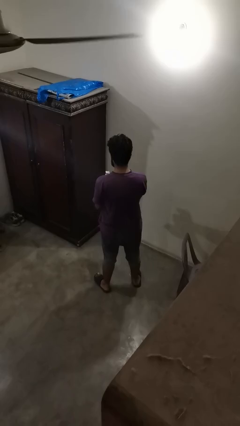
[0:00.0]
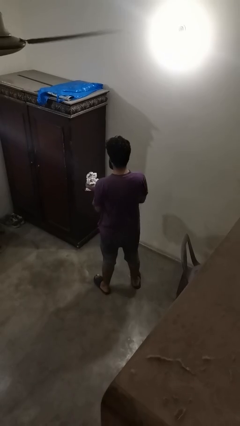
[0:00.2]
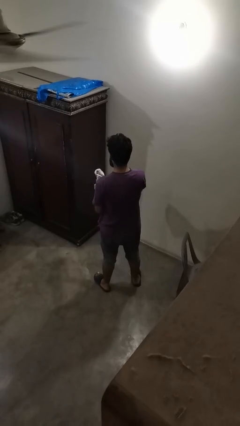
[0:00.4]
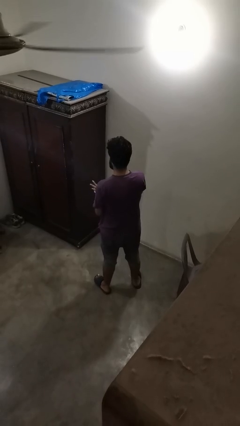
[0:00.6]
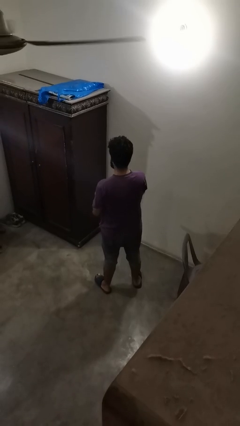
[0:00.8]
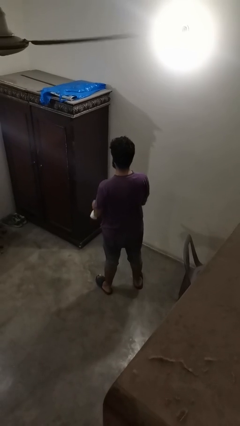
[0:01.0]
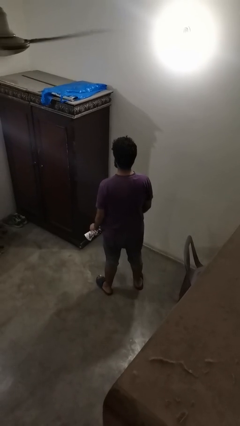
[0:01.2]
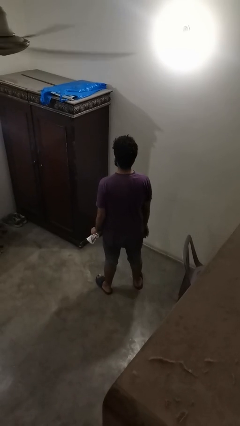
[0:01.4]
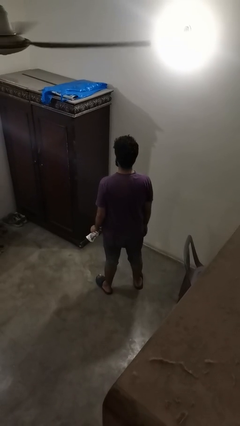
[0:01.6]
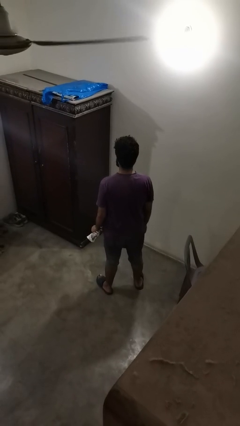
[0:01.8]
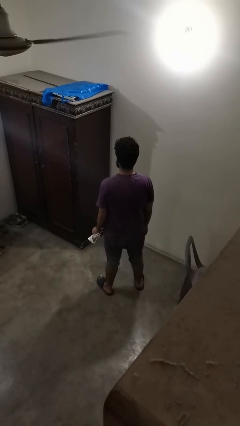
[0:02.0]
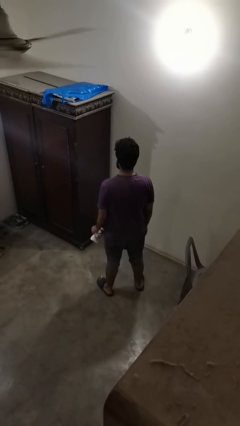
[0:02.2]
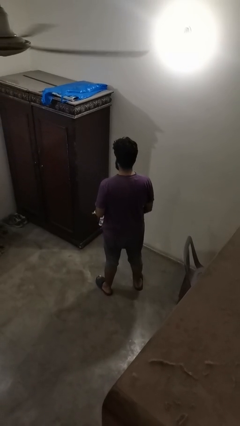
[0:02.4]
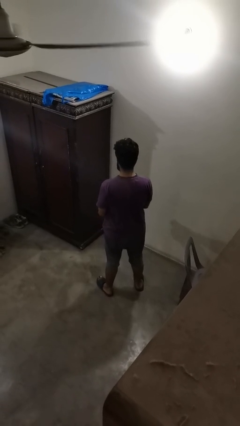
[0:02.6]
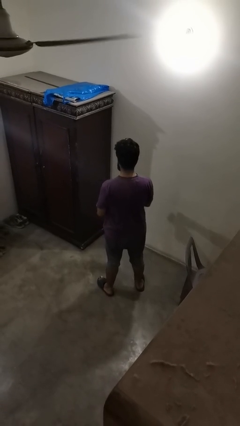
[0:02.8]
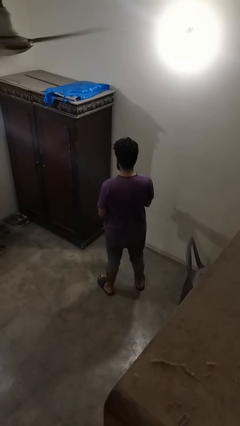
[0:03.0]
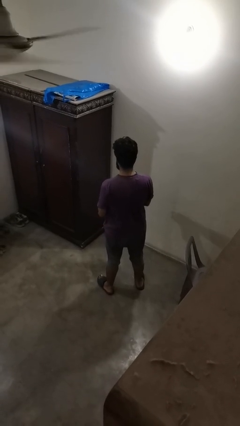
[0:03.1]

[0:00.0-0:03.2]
person crumples paper

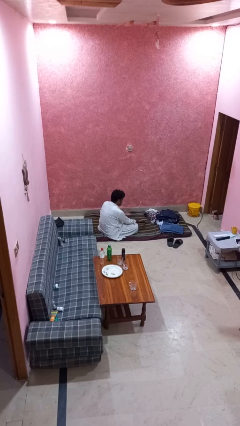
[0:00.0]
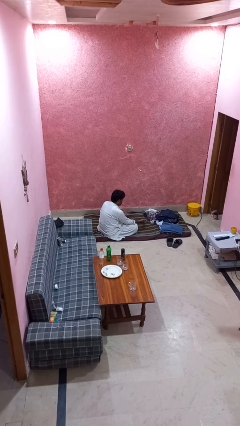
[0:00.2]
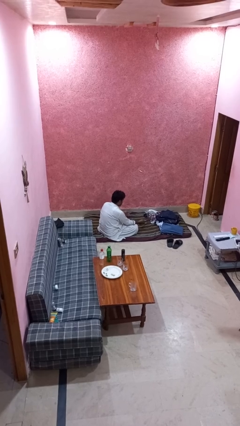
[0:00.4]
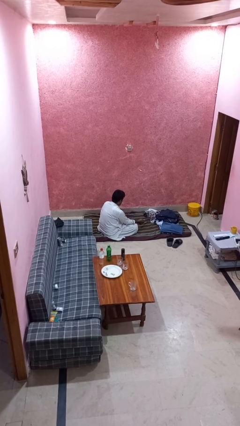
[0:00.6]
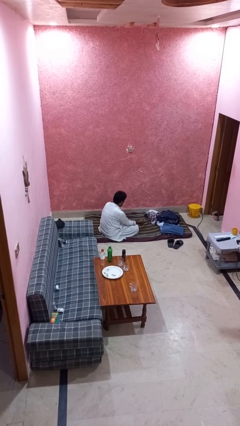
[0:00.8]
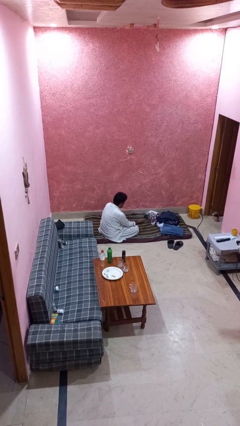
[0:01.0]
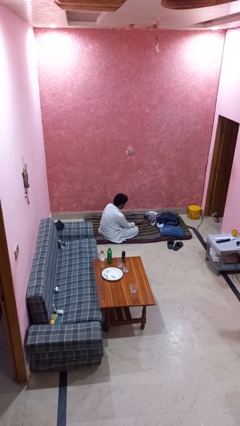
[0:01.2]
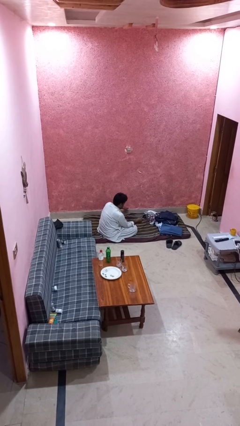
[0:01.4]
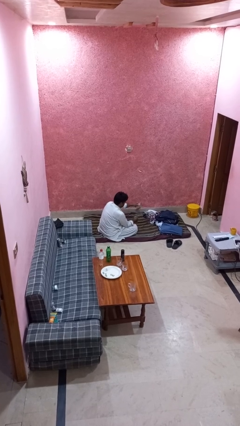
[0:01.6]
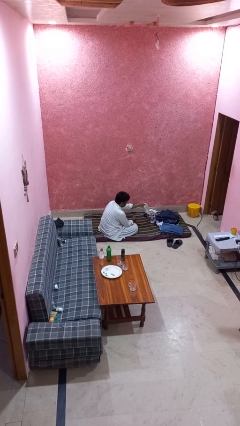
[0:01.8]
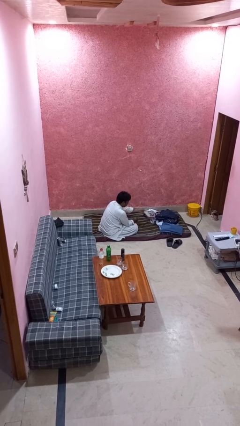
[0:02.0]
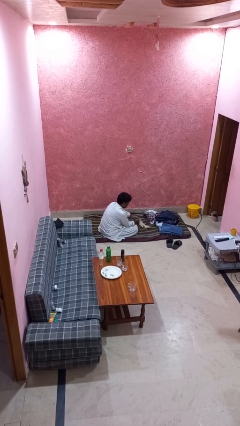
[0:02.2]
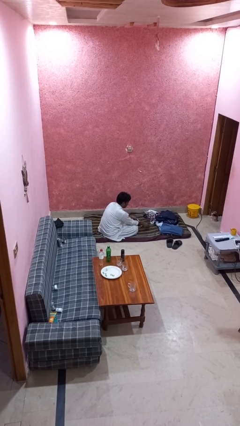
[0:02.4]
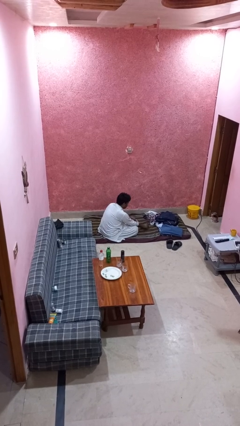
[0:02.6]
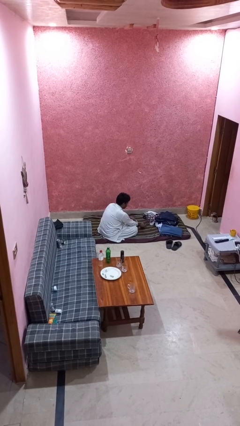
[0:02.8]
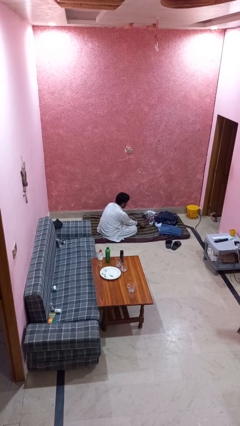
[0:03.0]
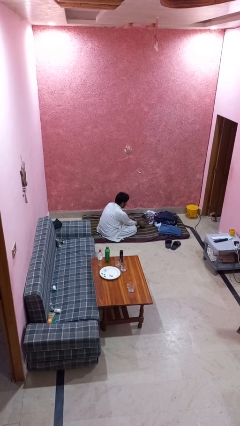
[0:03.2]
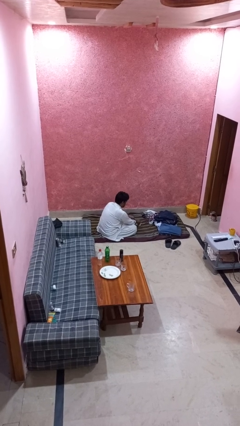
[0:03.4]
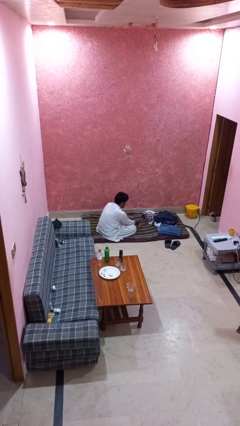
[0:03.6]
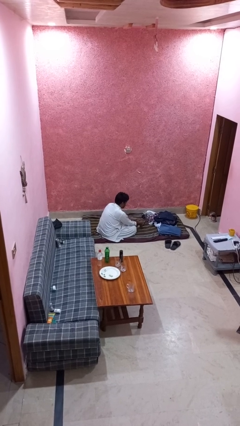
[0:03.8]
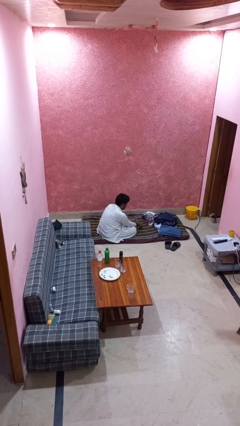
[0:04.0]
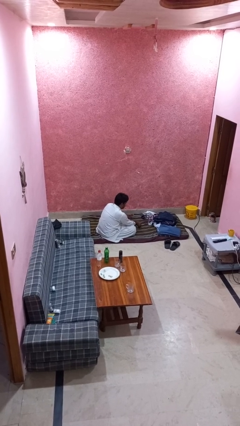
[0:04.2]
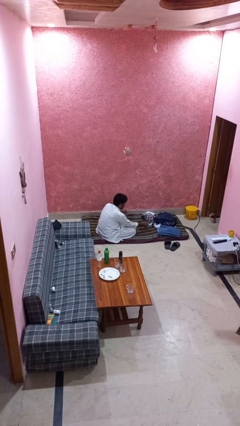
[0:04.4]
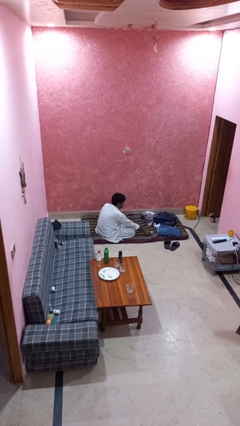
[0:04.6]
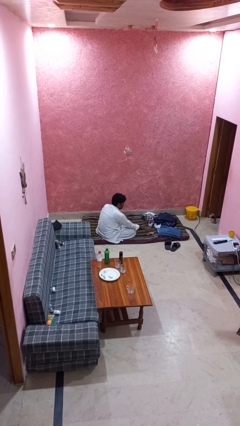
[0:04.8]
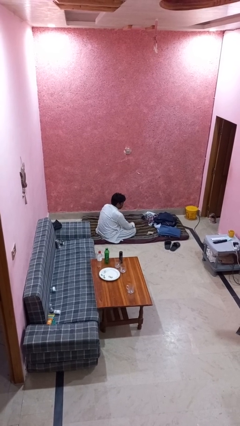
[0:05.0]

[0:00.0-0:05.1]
person folds socks

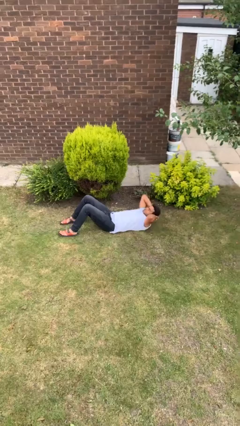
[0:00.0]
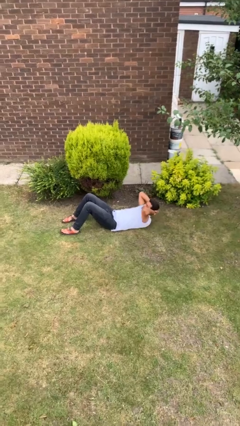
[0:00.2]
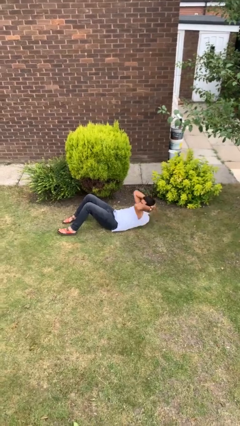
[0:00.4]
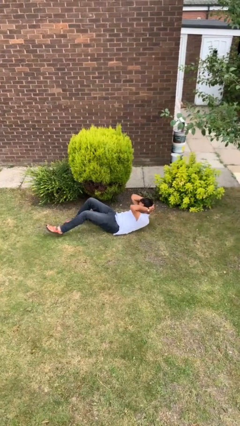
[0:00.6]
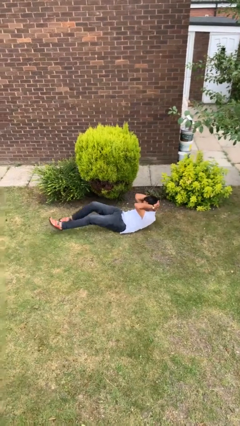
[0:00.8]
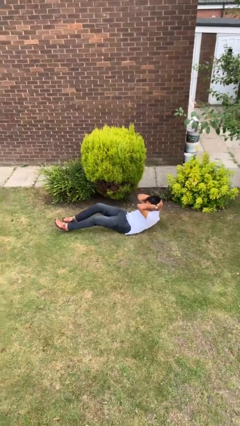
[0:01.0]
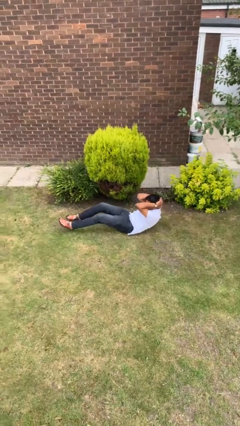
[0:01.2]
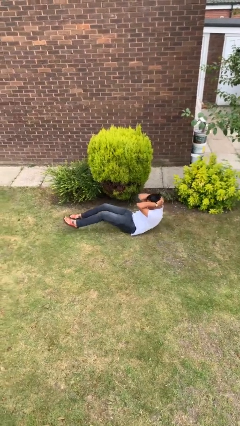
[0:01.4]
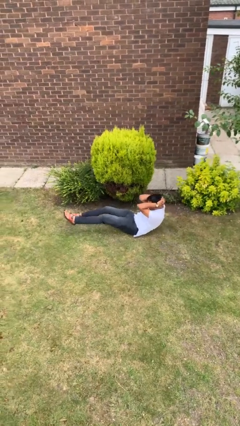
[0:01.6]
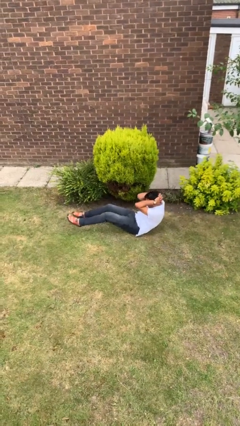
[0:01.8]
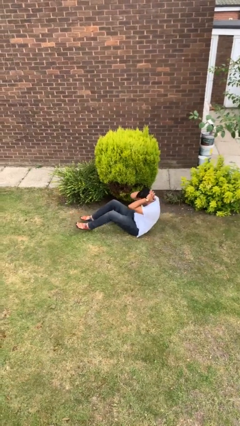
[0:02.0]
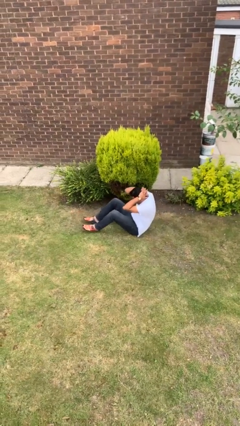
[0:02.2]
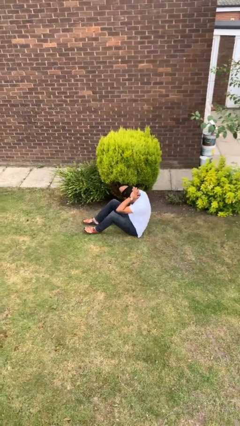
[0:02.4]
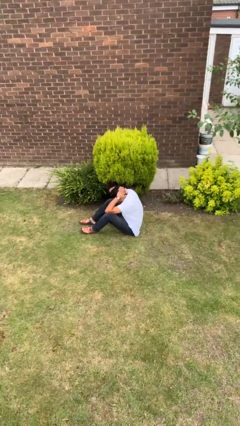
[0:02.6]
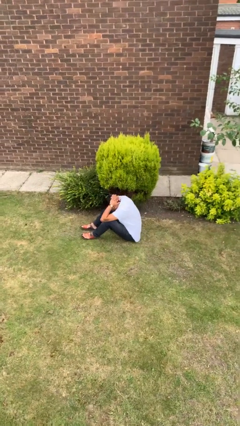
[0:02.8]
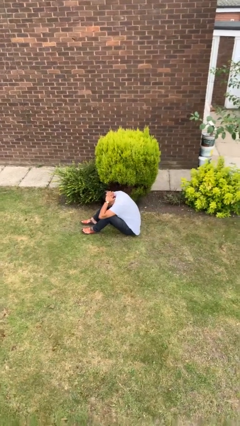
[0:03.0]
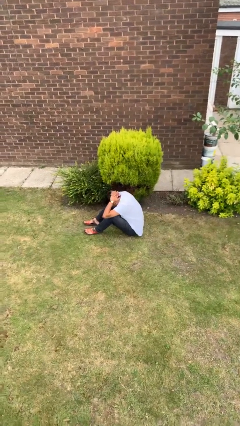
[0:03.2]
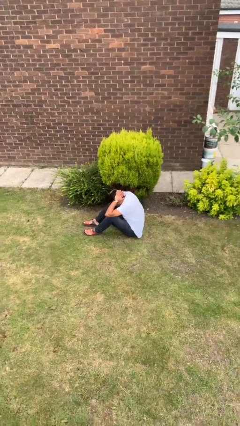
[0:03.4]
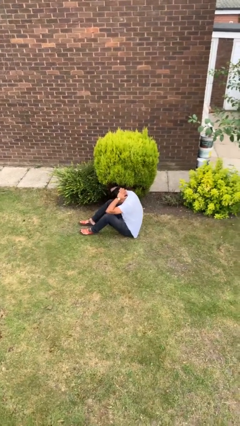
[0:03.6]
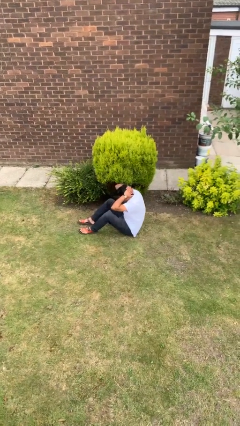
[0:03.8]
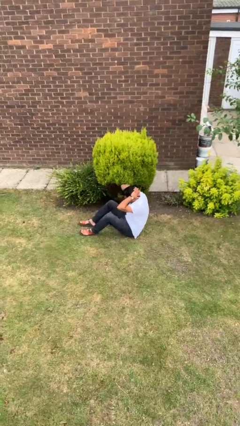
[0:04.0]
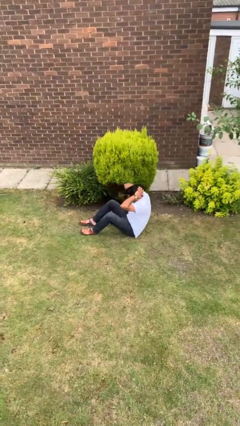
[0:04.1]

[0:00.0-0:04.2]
person exercises with situp

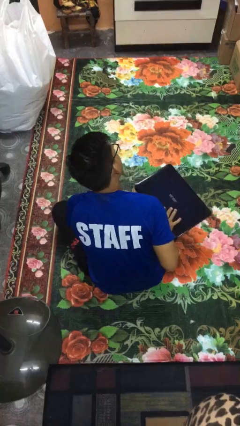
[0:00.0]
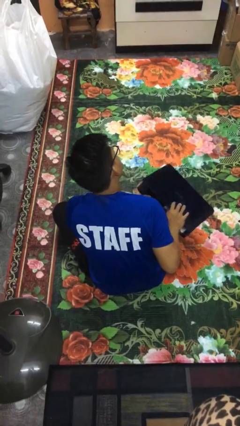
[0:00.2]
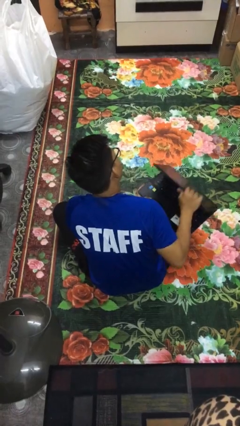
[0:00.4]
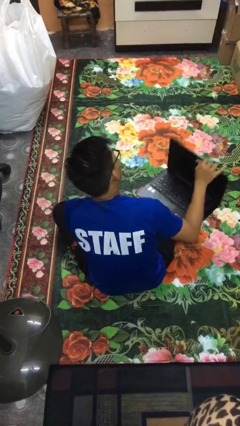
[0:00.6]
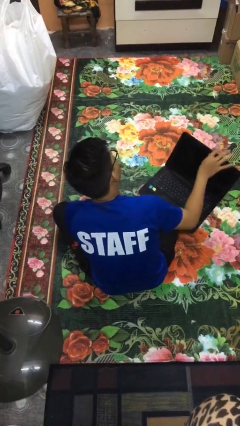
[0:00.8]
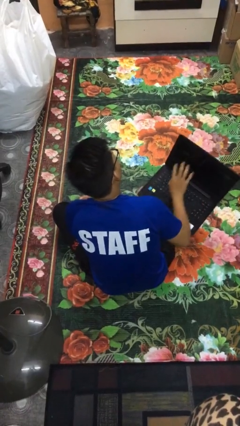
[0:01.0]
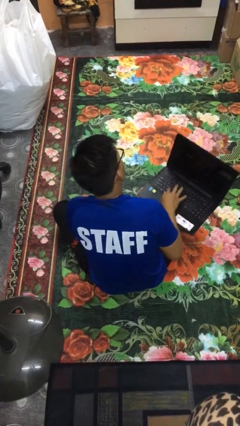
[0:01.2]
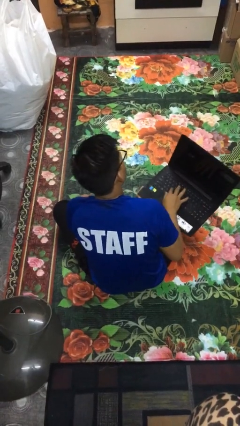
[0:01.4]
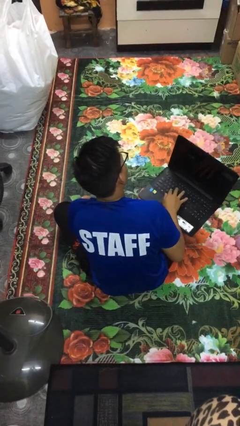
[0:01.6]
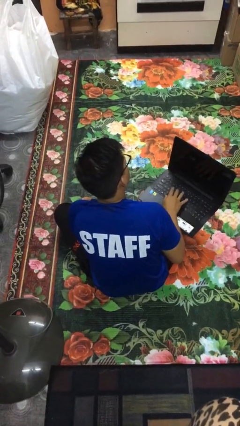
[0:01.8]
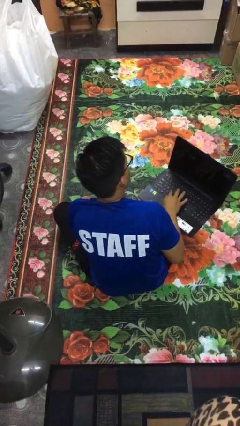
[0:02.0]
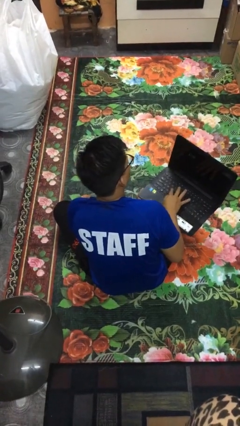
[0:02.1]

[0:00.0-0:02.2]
person opens laptop

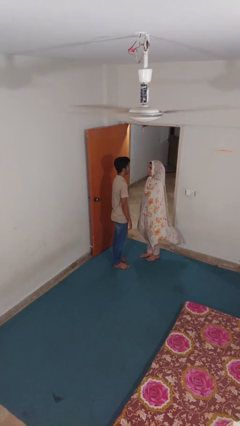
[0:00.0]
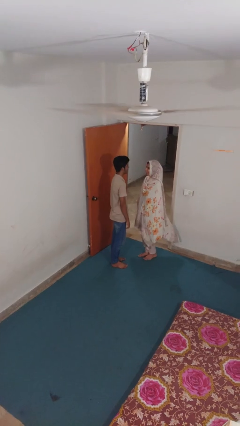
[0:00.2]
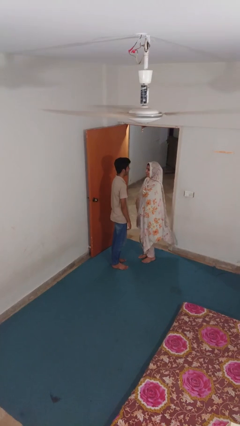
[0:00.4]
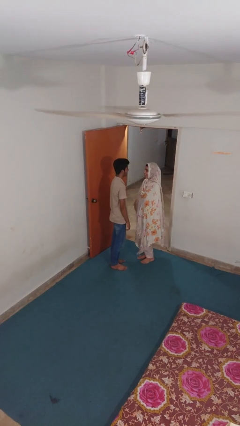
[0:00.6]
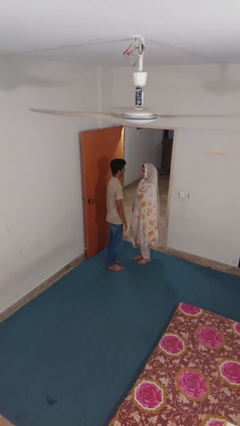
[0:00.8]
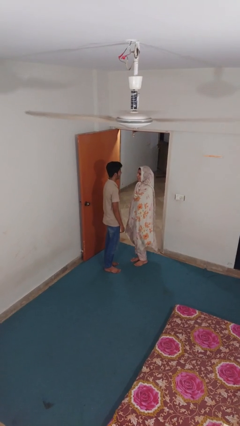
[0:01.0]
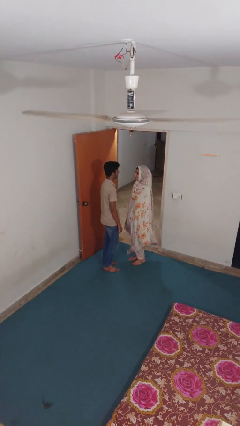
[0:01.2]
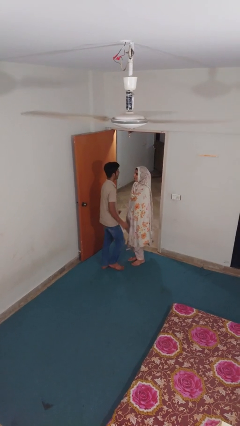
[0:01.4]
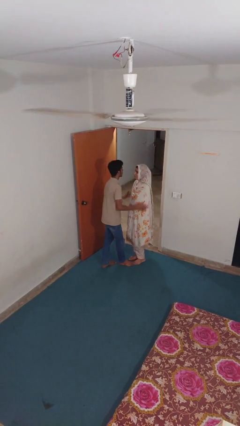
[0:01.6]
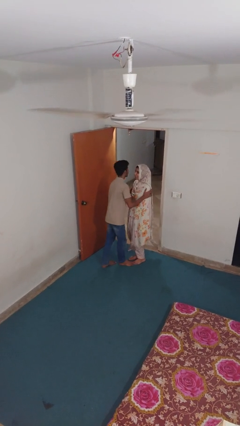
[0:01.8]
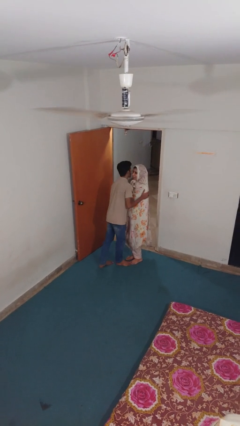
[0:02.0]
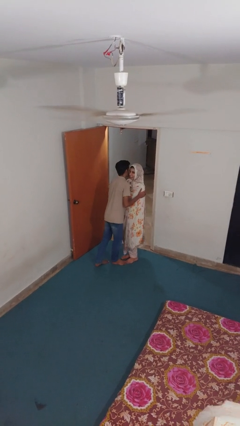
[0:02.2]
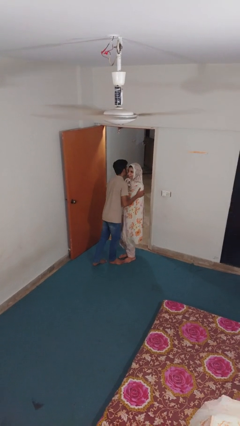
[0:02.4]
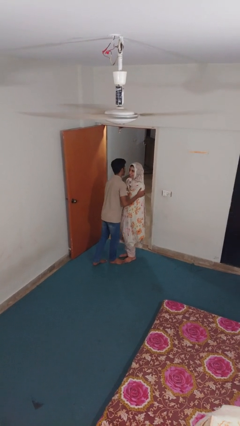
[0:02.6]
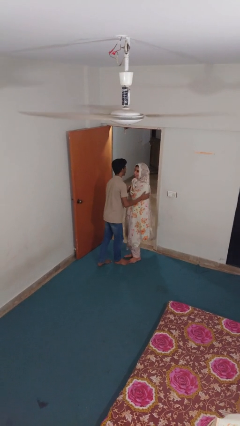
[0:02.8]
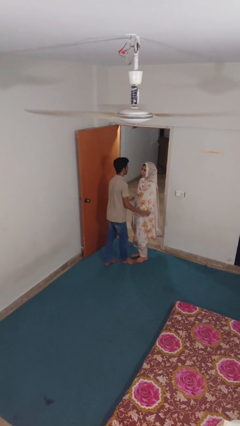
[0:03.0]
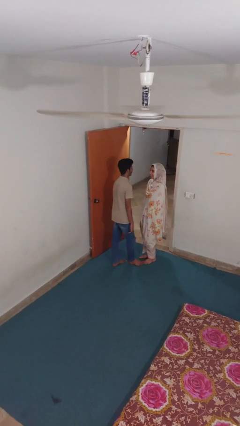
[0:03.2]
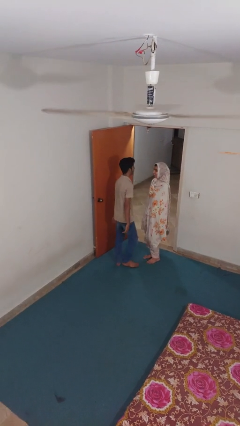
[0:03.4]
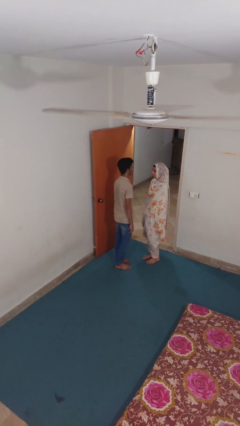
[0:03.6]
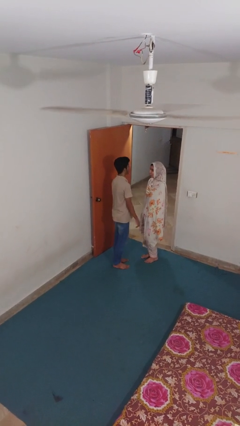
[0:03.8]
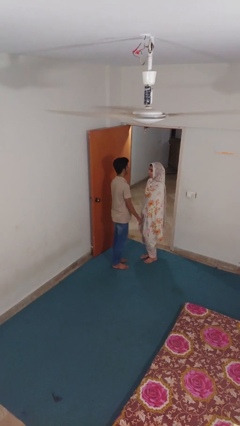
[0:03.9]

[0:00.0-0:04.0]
person kisses cheek of person
